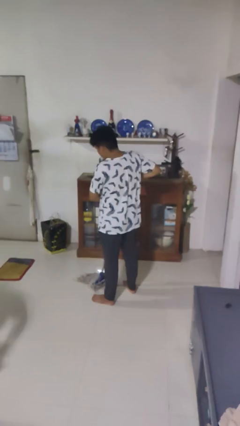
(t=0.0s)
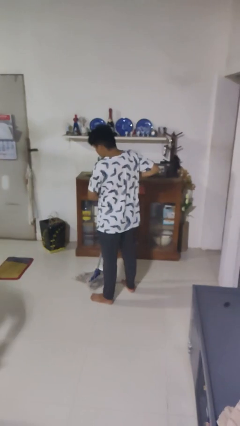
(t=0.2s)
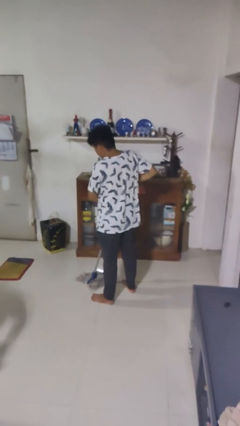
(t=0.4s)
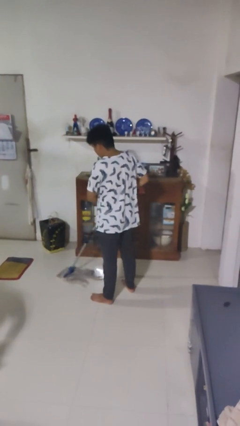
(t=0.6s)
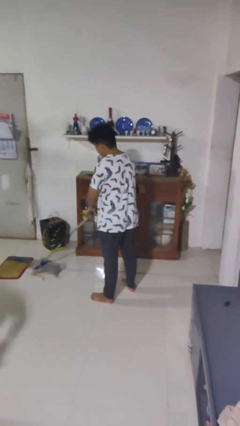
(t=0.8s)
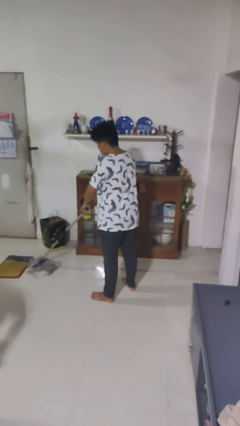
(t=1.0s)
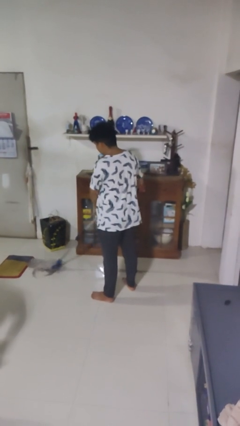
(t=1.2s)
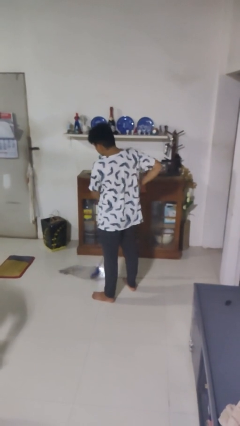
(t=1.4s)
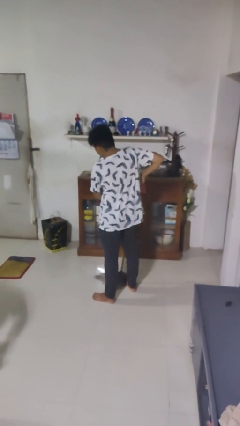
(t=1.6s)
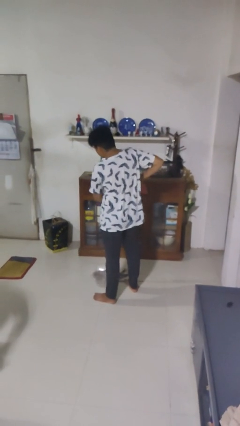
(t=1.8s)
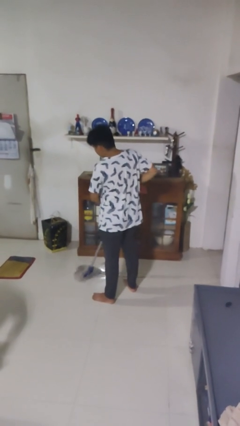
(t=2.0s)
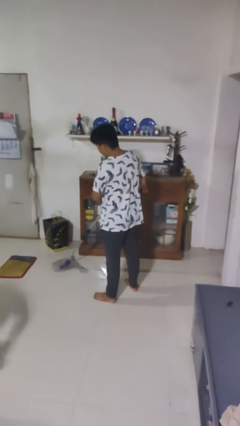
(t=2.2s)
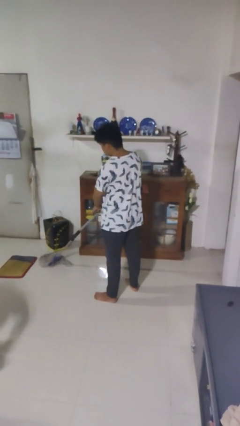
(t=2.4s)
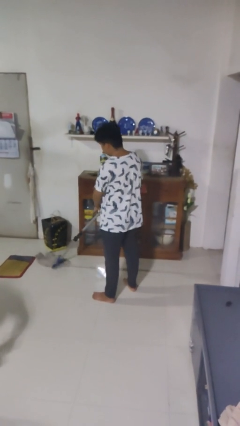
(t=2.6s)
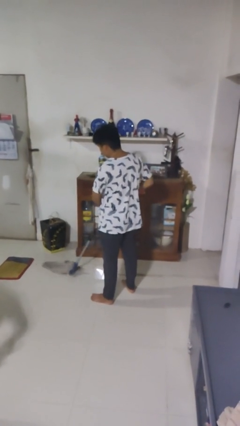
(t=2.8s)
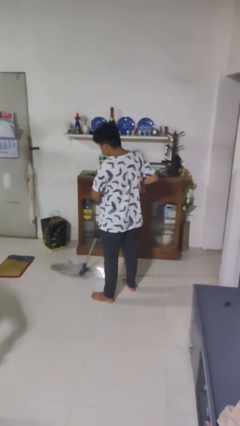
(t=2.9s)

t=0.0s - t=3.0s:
person mops

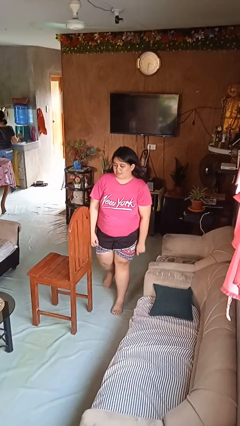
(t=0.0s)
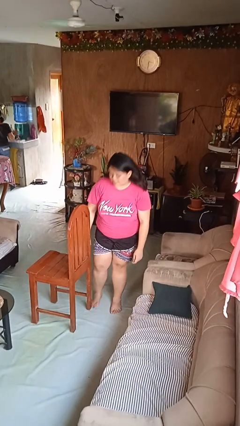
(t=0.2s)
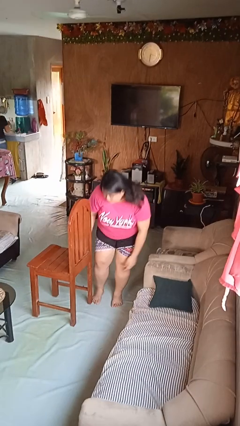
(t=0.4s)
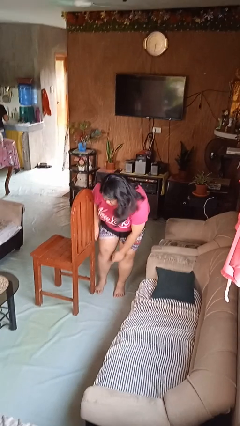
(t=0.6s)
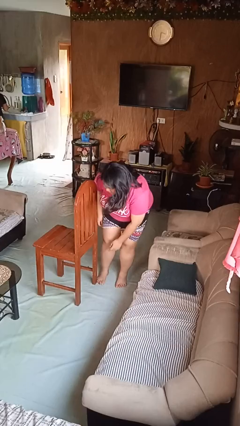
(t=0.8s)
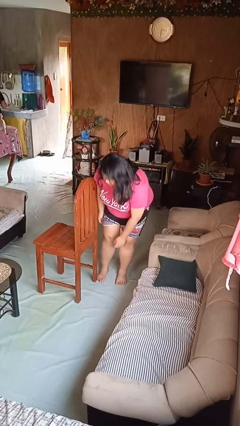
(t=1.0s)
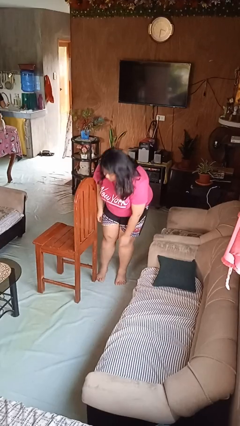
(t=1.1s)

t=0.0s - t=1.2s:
person stubs toe

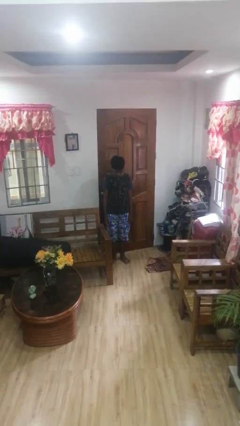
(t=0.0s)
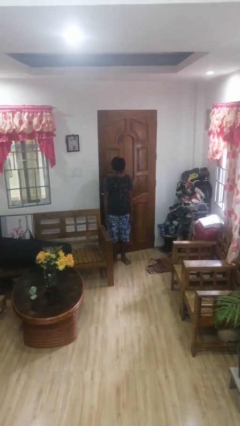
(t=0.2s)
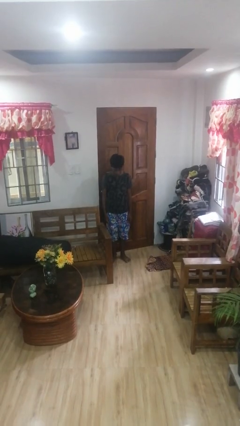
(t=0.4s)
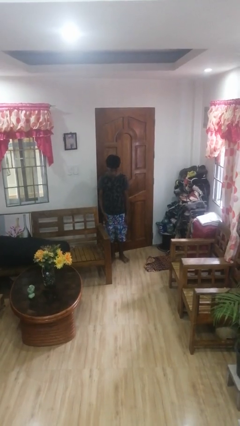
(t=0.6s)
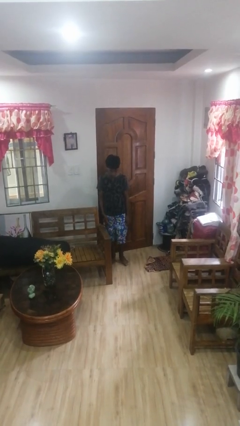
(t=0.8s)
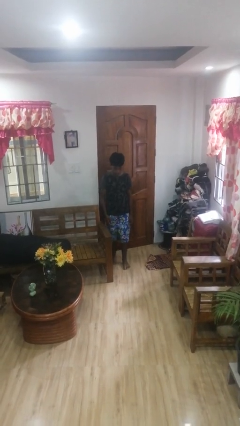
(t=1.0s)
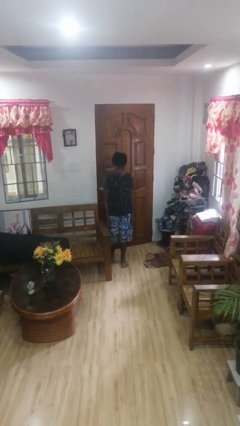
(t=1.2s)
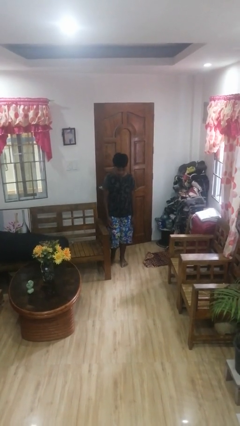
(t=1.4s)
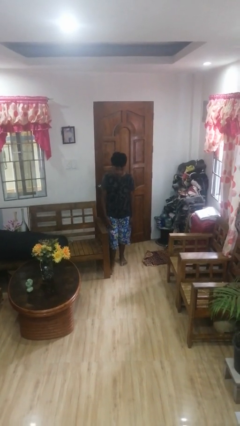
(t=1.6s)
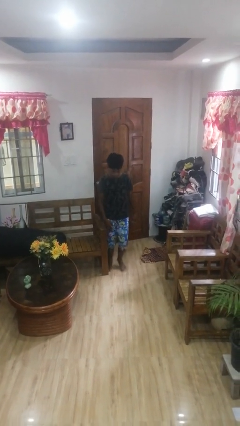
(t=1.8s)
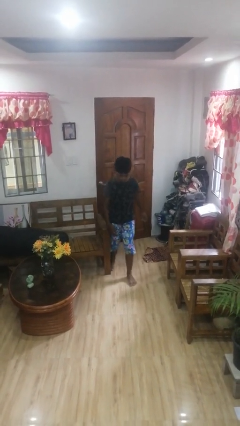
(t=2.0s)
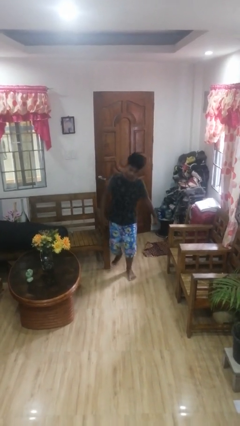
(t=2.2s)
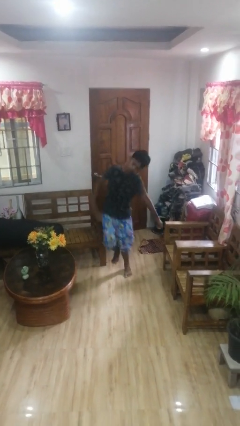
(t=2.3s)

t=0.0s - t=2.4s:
person trips on object on floor

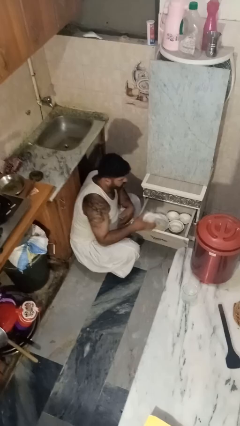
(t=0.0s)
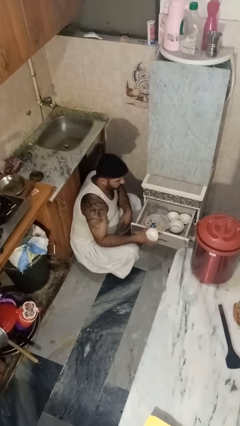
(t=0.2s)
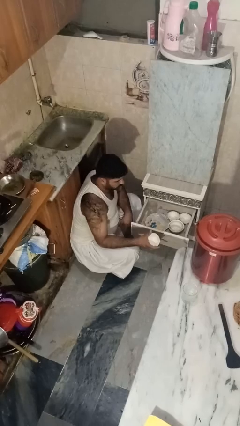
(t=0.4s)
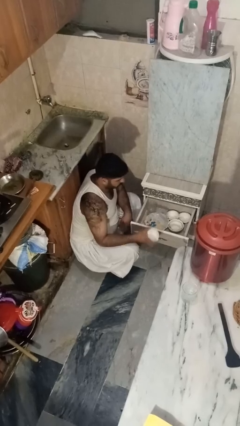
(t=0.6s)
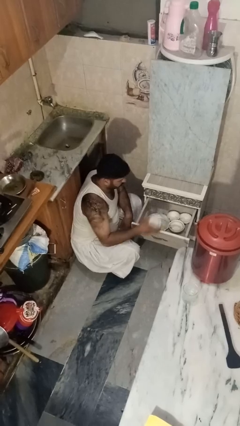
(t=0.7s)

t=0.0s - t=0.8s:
person puts object into kitchen drawer

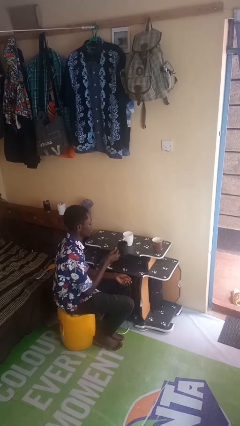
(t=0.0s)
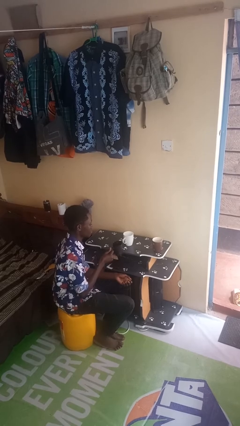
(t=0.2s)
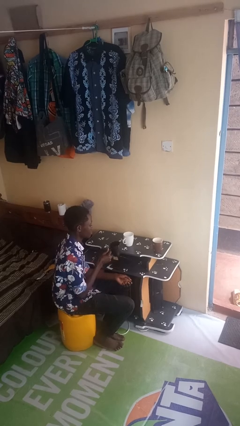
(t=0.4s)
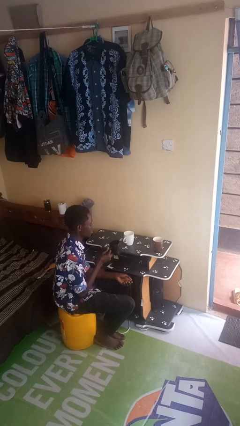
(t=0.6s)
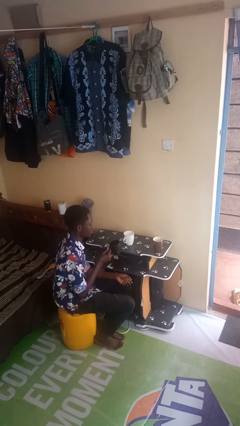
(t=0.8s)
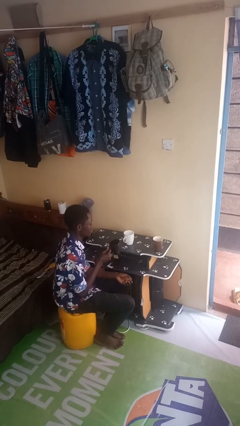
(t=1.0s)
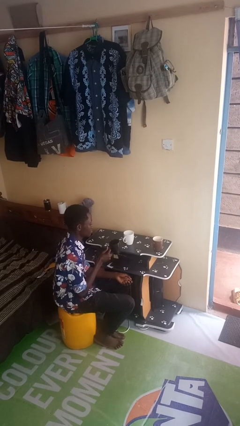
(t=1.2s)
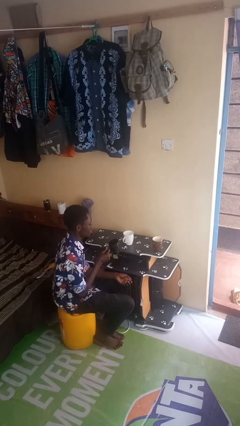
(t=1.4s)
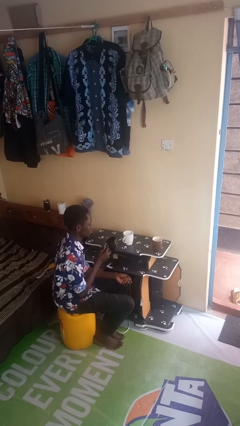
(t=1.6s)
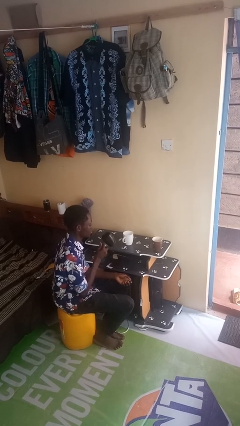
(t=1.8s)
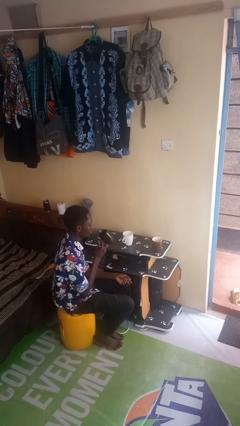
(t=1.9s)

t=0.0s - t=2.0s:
person picks up object from table

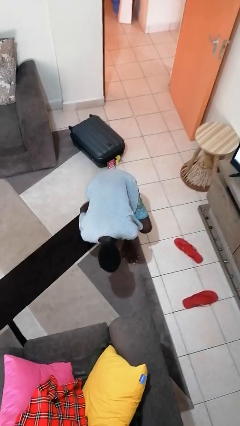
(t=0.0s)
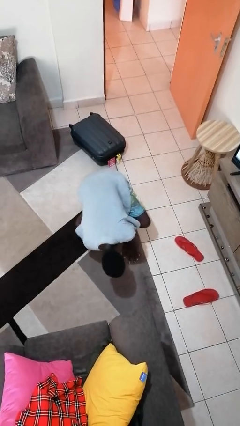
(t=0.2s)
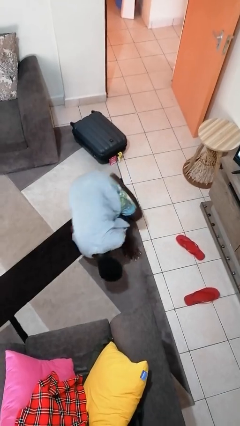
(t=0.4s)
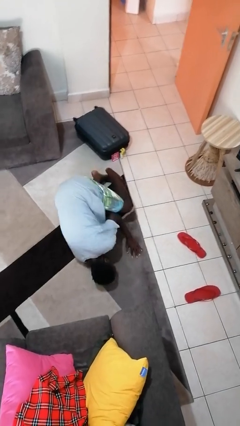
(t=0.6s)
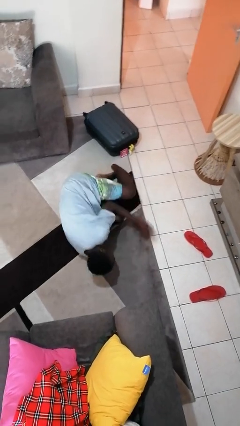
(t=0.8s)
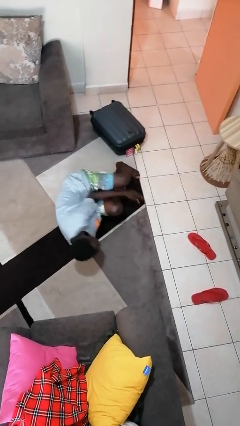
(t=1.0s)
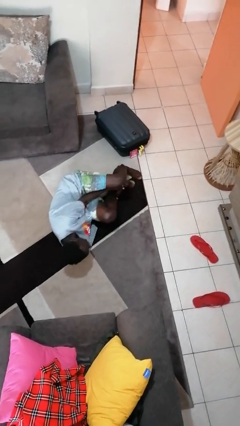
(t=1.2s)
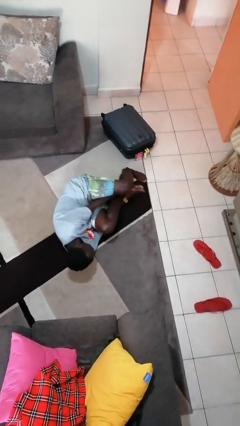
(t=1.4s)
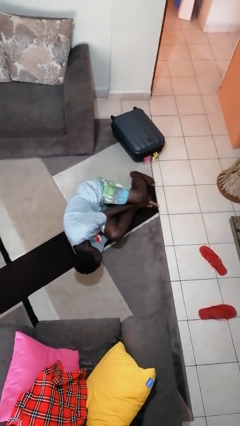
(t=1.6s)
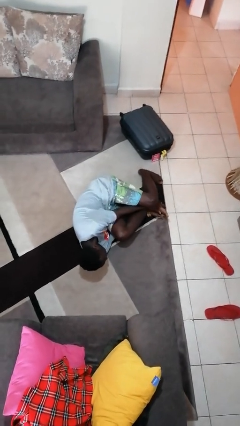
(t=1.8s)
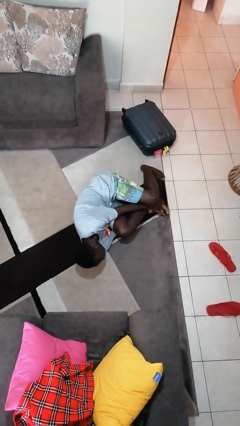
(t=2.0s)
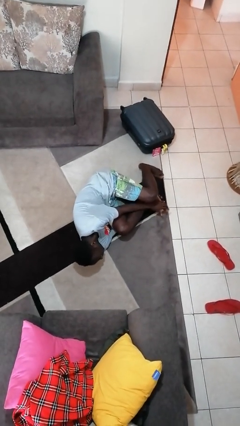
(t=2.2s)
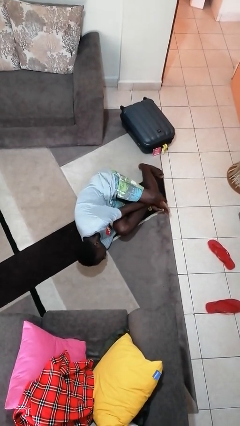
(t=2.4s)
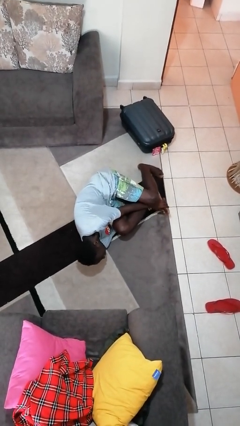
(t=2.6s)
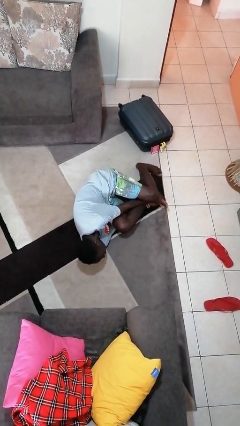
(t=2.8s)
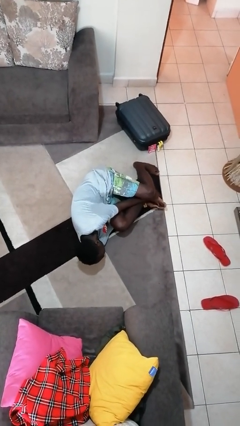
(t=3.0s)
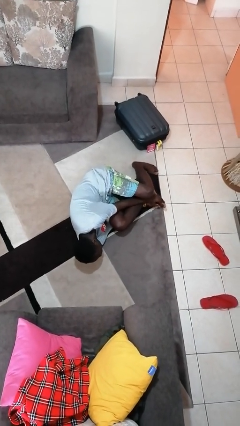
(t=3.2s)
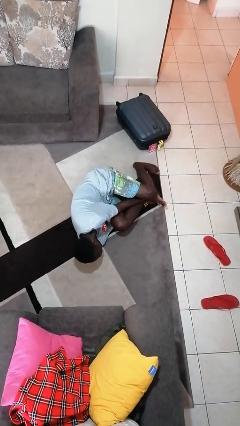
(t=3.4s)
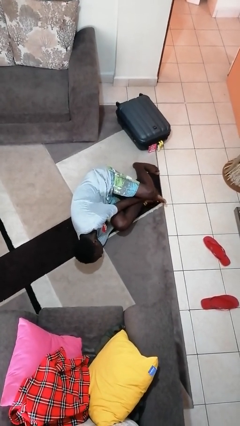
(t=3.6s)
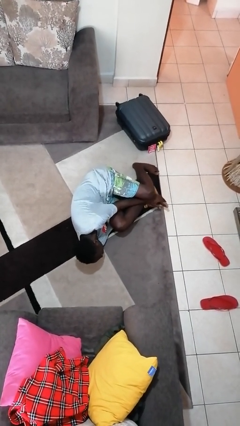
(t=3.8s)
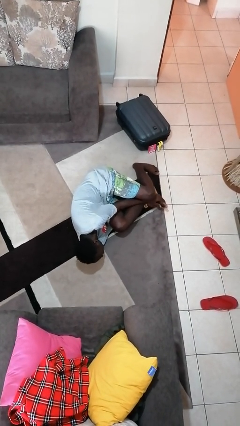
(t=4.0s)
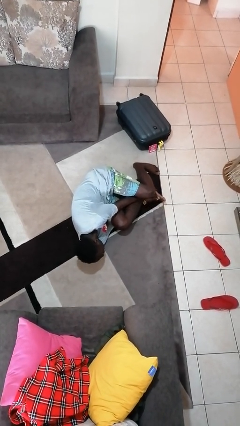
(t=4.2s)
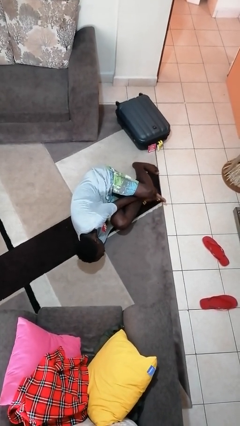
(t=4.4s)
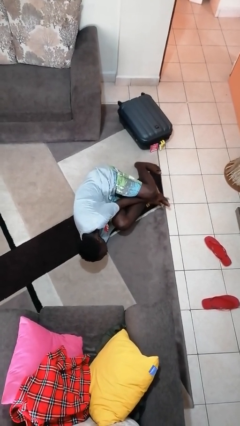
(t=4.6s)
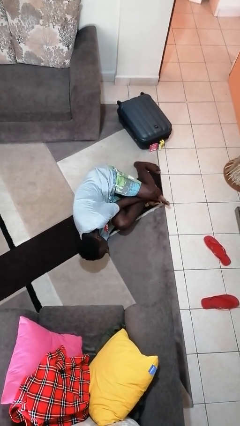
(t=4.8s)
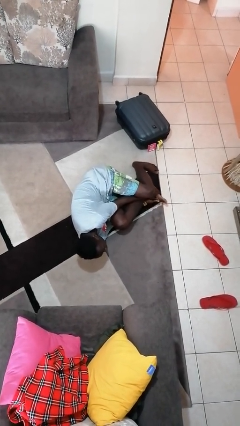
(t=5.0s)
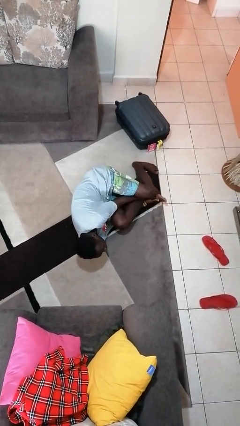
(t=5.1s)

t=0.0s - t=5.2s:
person lies down on floor

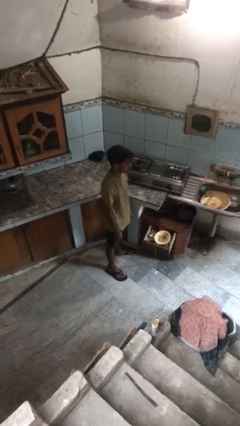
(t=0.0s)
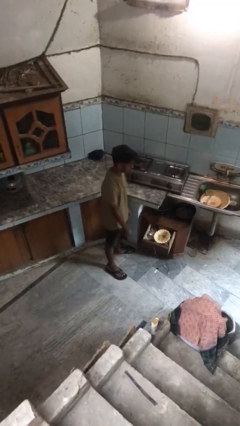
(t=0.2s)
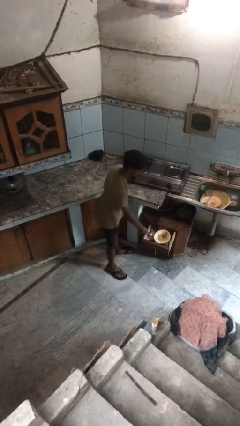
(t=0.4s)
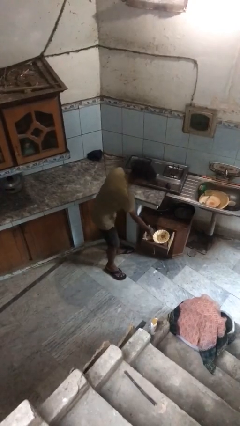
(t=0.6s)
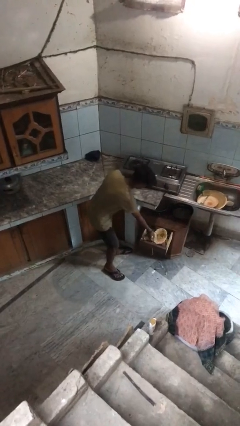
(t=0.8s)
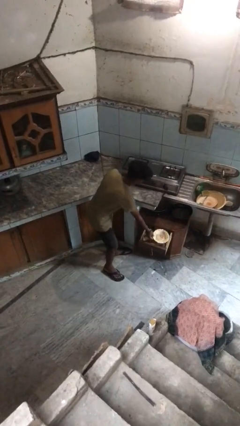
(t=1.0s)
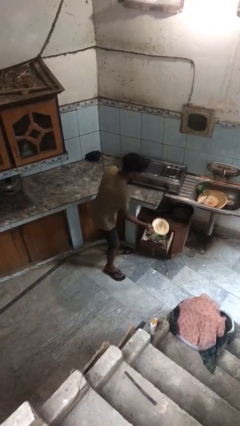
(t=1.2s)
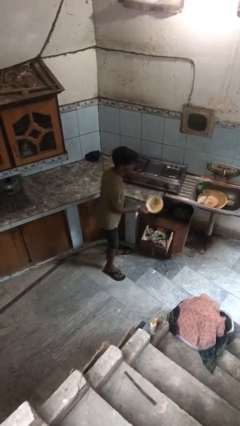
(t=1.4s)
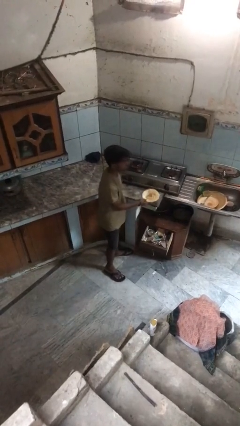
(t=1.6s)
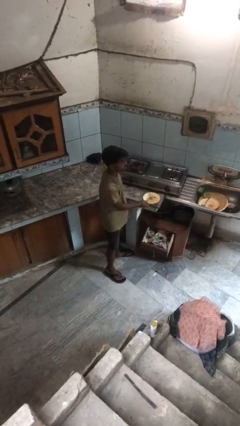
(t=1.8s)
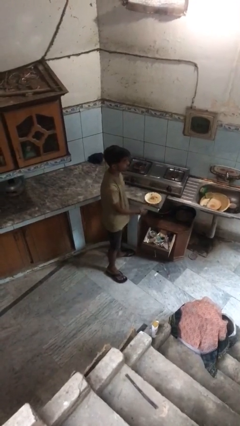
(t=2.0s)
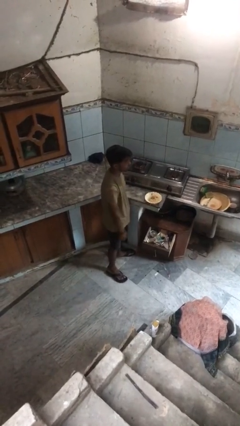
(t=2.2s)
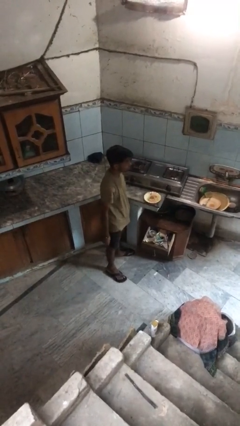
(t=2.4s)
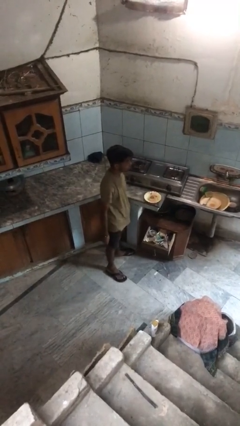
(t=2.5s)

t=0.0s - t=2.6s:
person takes object from kitchen drawer

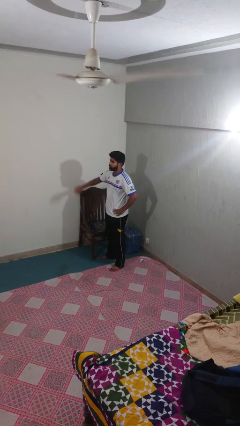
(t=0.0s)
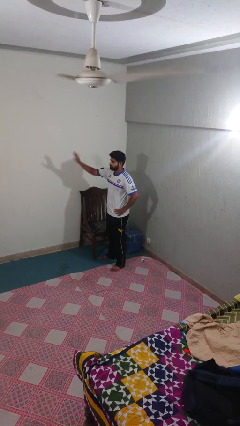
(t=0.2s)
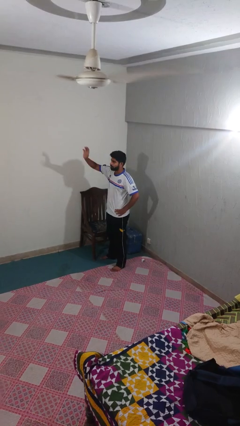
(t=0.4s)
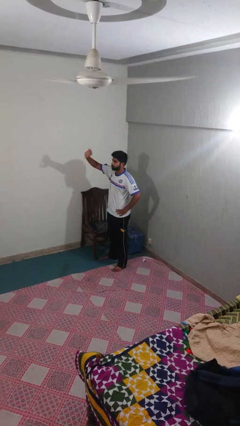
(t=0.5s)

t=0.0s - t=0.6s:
person waves at person
